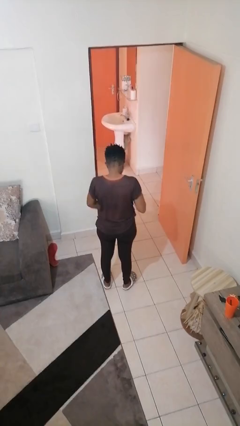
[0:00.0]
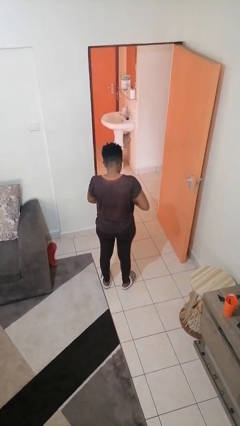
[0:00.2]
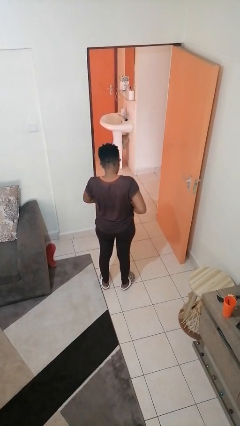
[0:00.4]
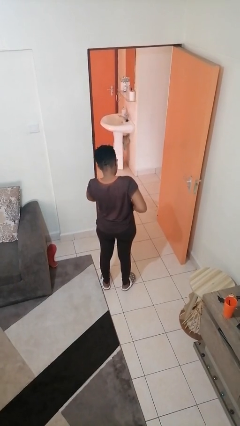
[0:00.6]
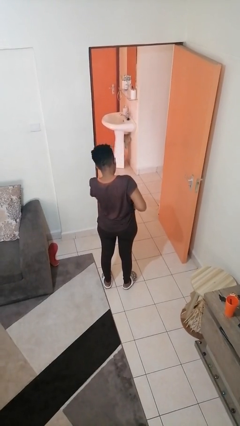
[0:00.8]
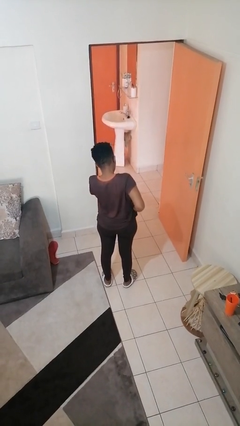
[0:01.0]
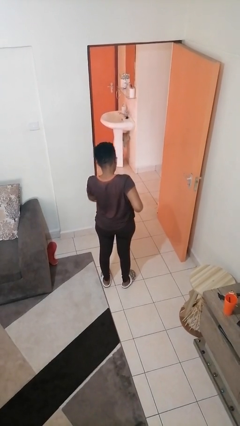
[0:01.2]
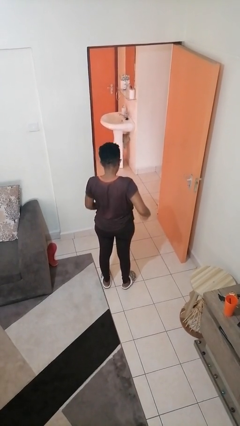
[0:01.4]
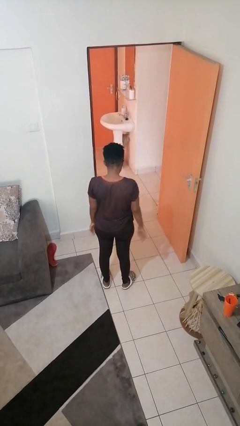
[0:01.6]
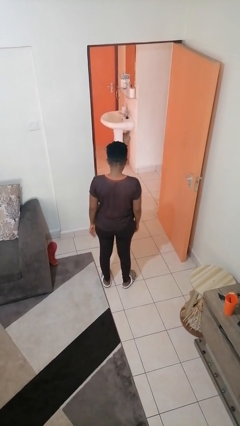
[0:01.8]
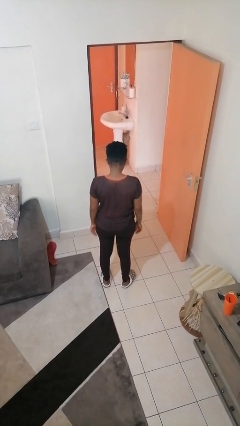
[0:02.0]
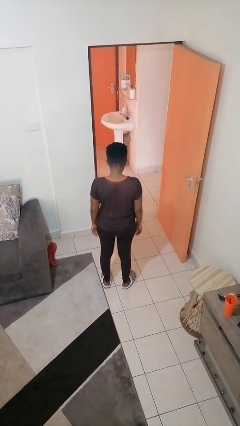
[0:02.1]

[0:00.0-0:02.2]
person puts phone into pocket

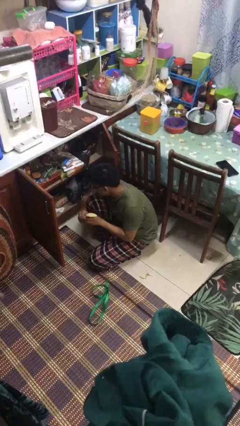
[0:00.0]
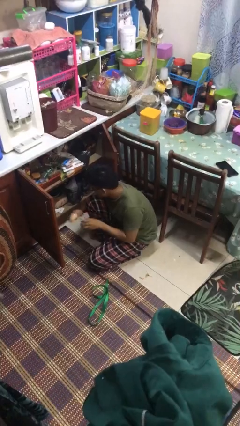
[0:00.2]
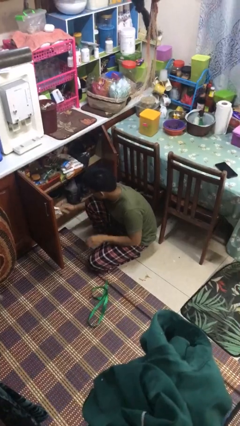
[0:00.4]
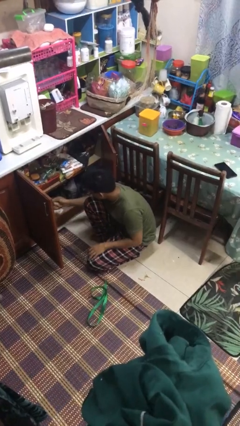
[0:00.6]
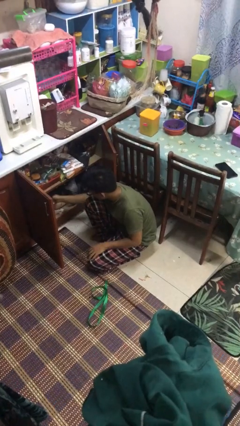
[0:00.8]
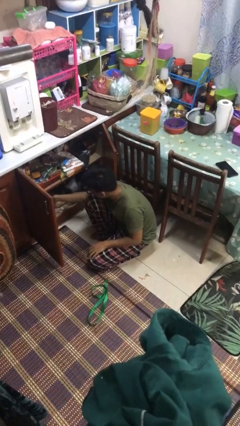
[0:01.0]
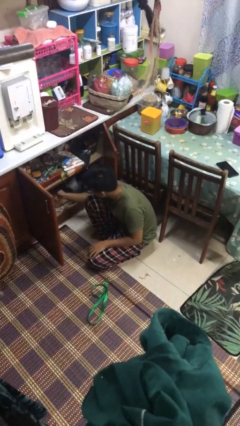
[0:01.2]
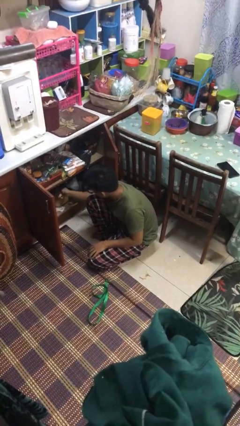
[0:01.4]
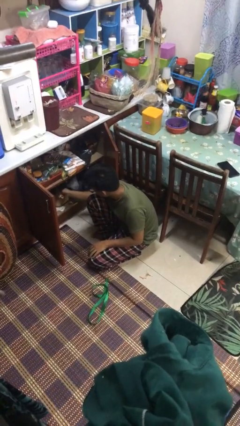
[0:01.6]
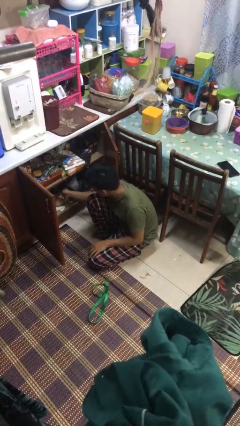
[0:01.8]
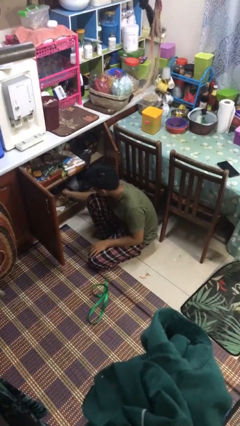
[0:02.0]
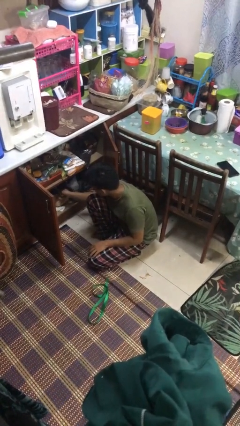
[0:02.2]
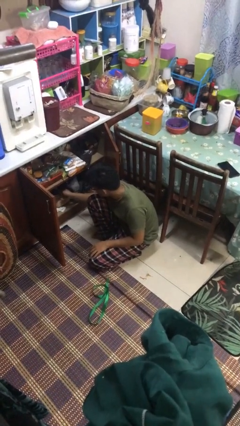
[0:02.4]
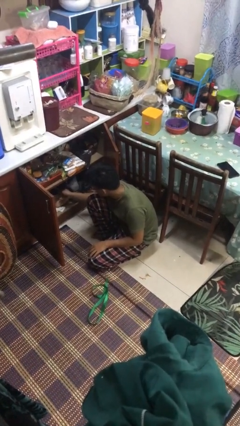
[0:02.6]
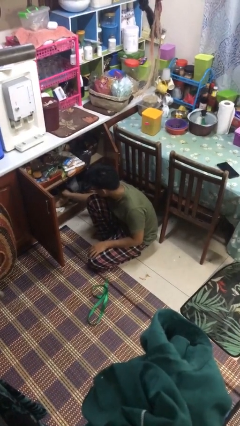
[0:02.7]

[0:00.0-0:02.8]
person puts object into kitchen drawer

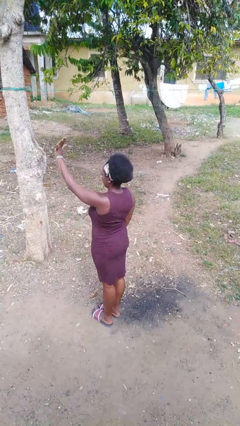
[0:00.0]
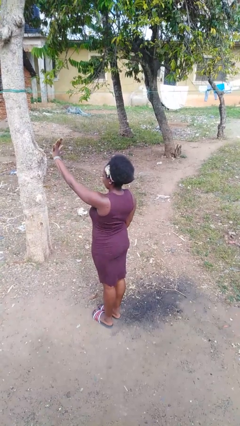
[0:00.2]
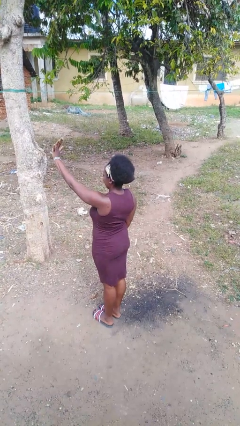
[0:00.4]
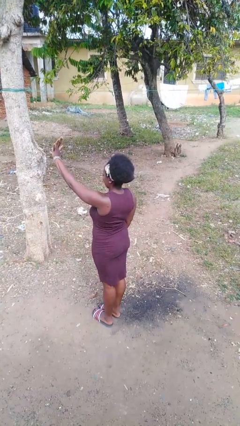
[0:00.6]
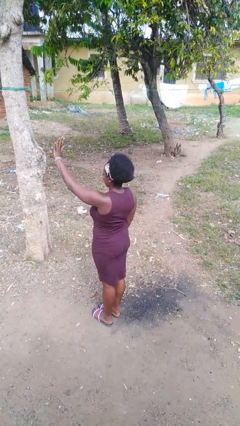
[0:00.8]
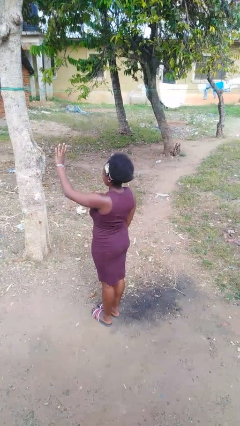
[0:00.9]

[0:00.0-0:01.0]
person gestures number five

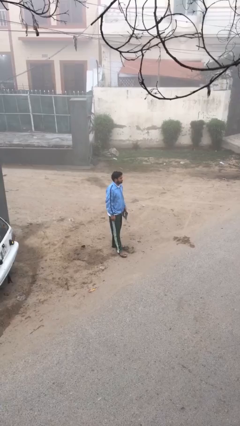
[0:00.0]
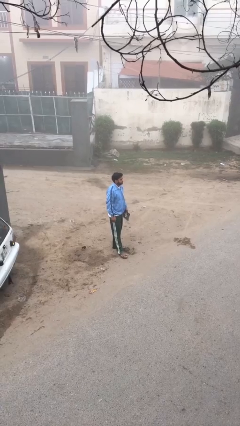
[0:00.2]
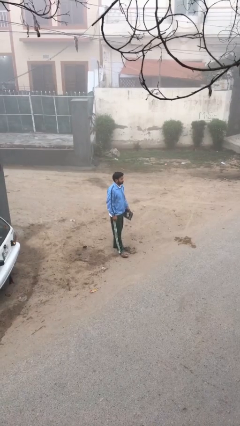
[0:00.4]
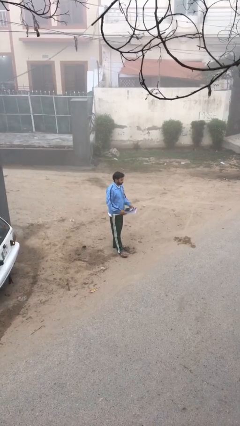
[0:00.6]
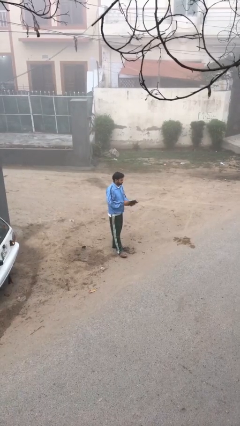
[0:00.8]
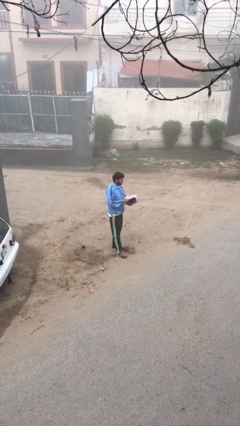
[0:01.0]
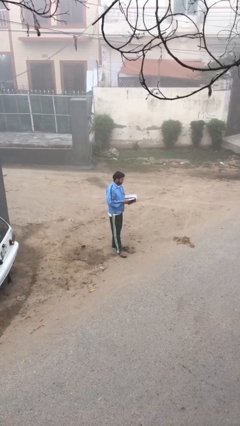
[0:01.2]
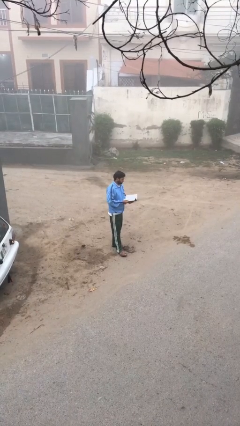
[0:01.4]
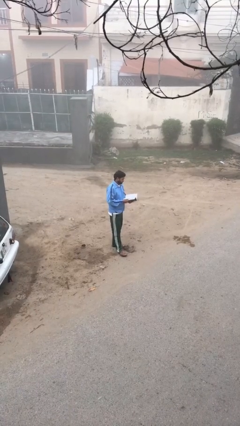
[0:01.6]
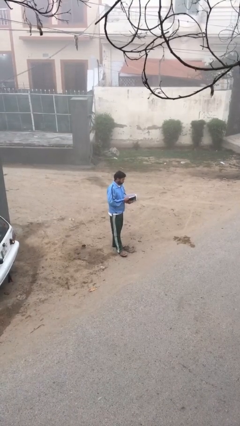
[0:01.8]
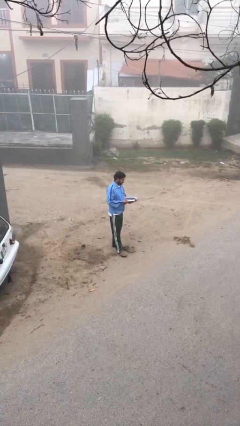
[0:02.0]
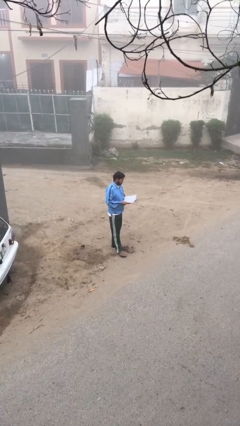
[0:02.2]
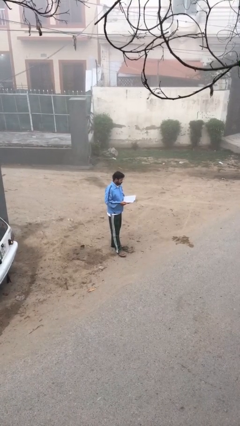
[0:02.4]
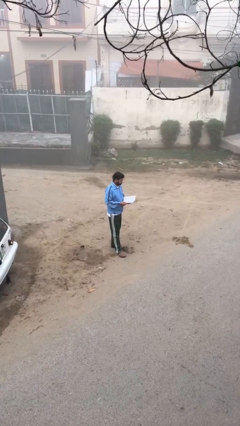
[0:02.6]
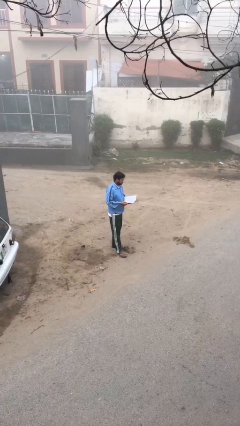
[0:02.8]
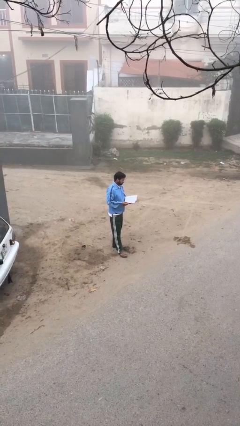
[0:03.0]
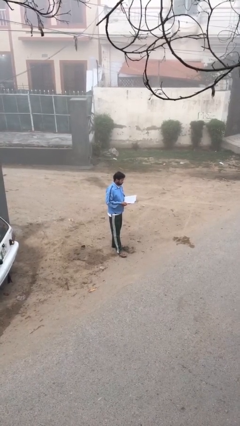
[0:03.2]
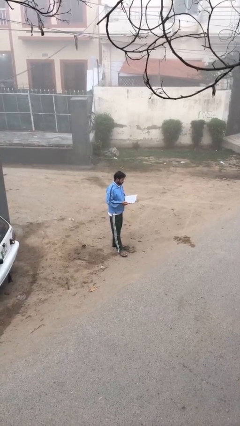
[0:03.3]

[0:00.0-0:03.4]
person reads document

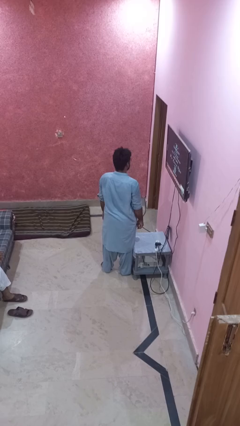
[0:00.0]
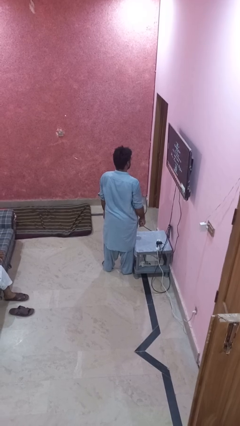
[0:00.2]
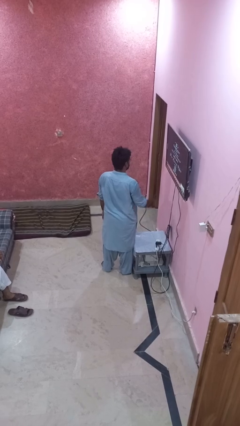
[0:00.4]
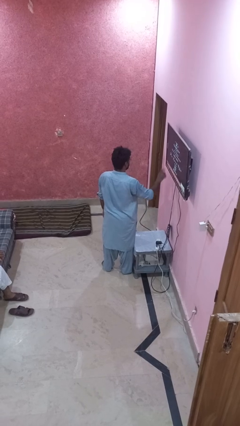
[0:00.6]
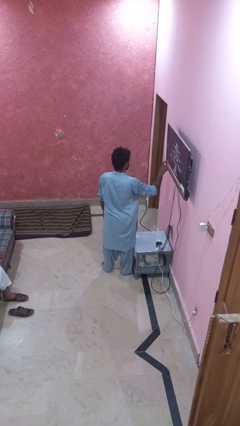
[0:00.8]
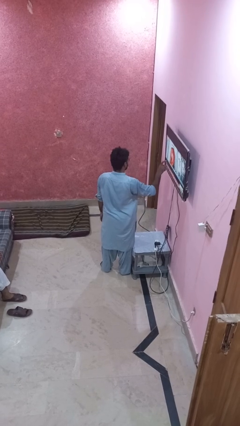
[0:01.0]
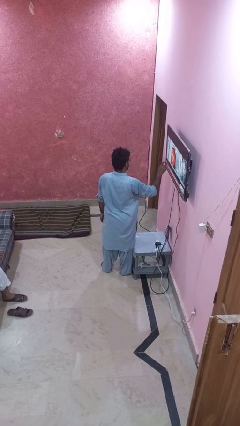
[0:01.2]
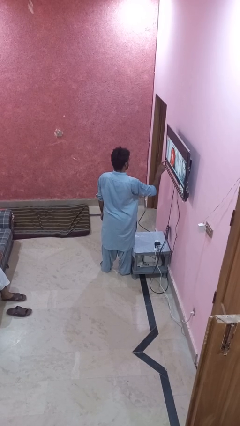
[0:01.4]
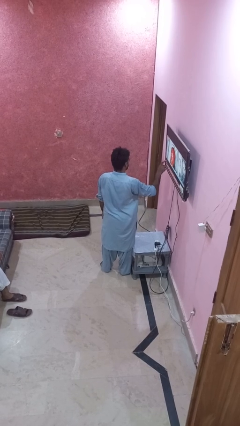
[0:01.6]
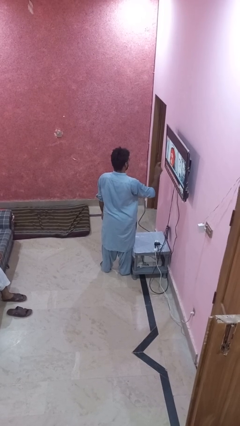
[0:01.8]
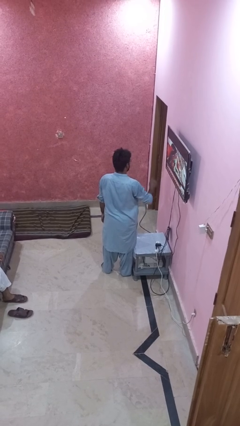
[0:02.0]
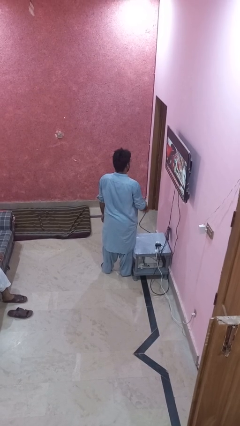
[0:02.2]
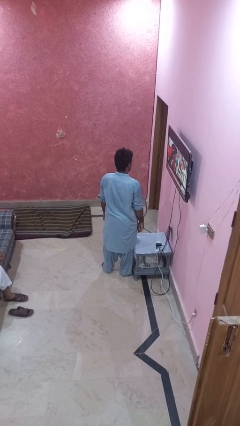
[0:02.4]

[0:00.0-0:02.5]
person taps object with finger

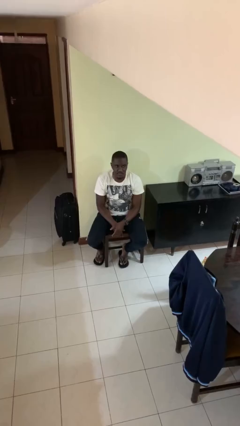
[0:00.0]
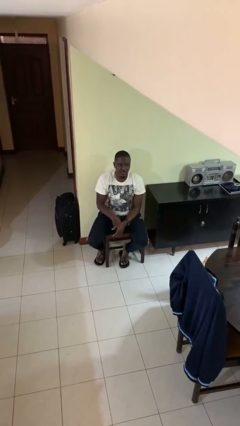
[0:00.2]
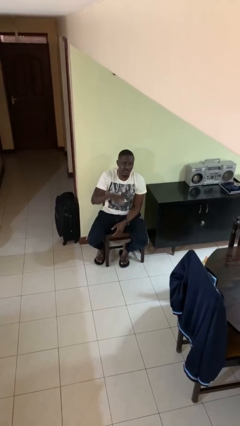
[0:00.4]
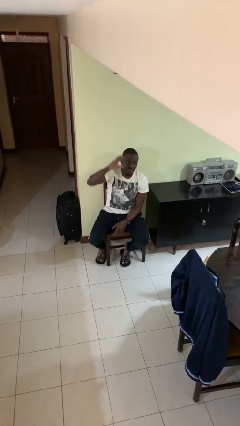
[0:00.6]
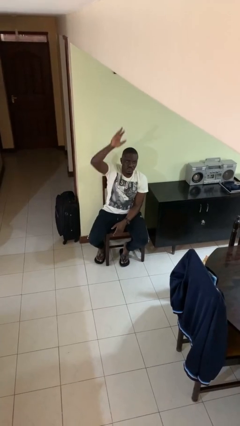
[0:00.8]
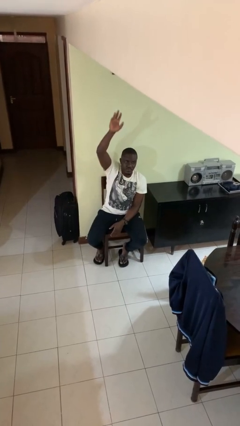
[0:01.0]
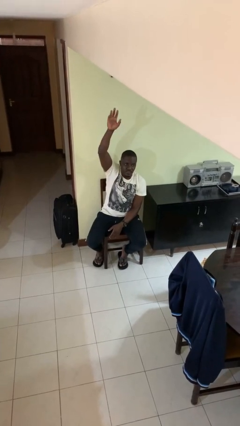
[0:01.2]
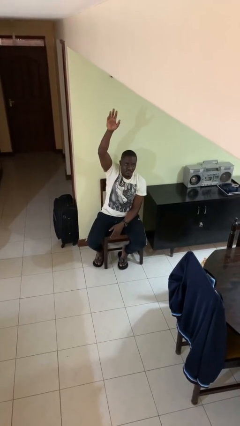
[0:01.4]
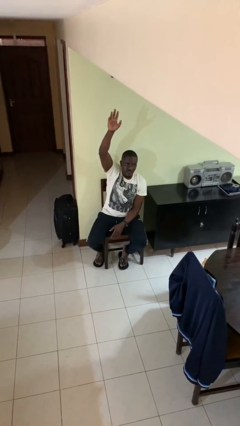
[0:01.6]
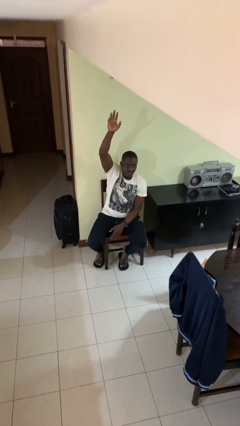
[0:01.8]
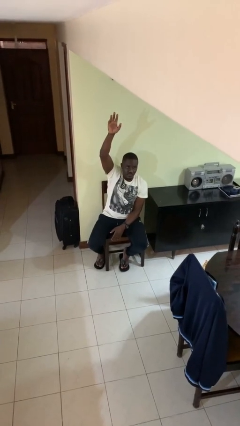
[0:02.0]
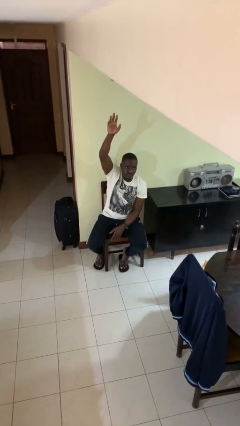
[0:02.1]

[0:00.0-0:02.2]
person gestures raise hand

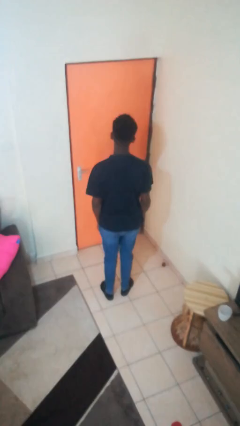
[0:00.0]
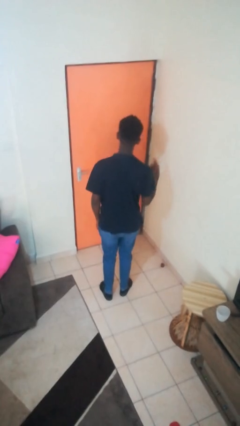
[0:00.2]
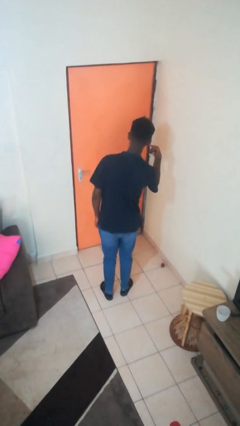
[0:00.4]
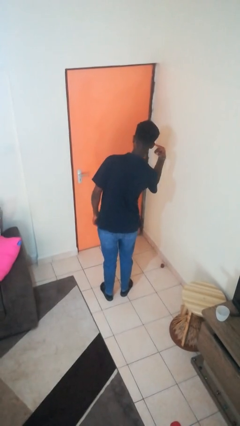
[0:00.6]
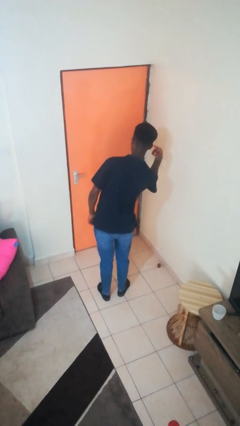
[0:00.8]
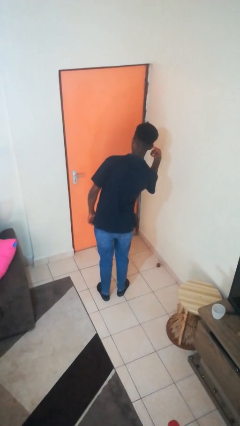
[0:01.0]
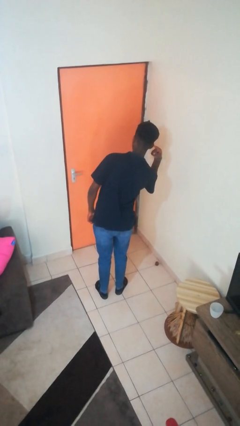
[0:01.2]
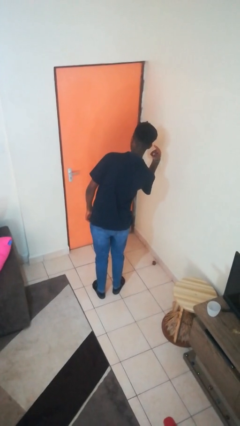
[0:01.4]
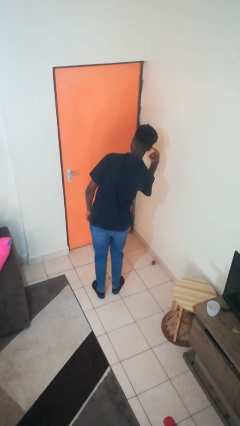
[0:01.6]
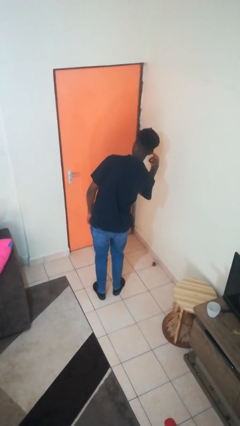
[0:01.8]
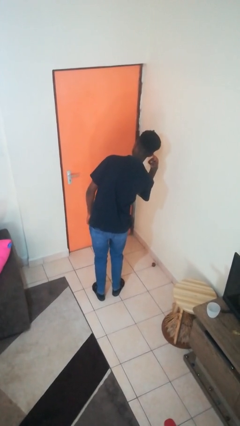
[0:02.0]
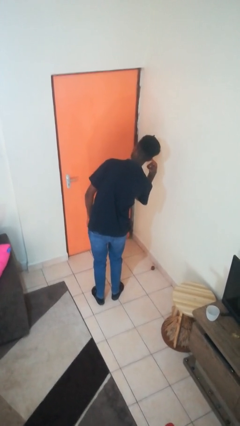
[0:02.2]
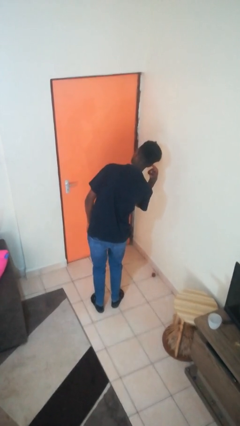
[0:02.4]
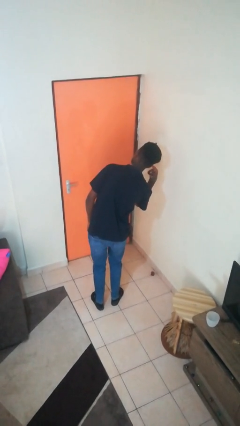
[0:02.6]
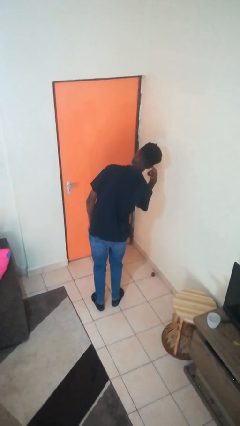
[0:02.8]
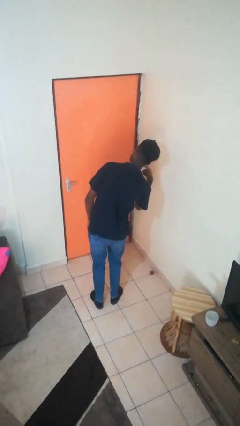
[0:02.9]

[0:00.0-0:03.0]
person gestures listen closely
